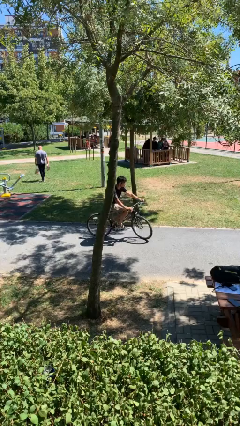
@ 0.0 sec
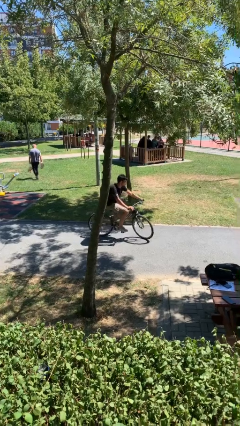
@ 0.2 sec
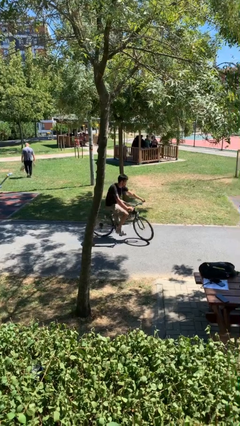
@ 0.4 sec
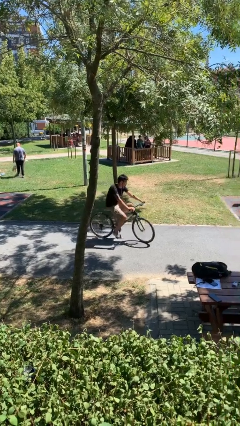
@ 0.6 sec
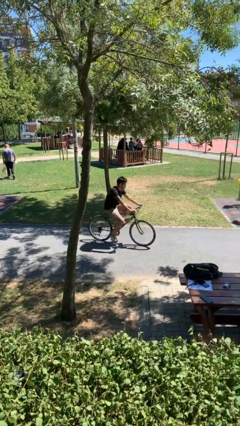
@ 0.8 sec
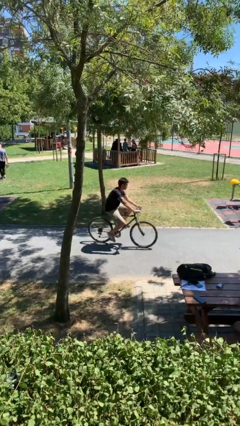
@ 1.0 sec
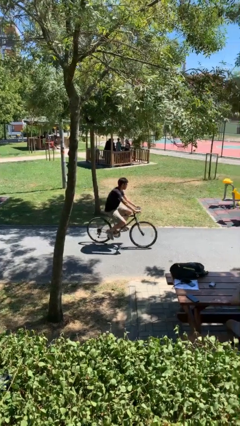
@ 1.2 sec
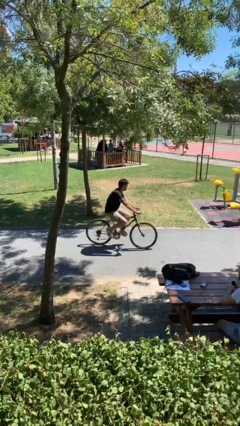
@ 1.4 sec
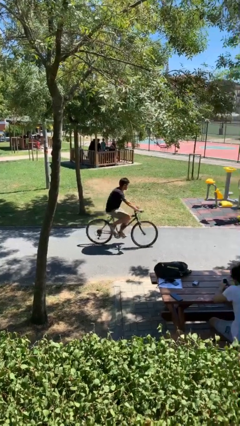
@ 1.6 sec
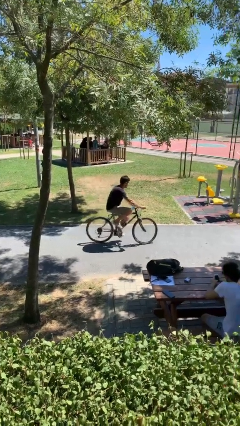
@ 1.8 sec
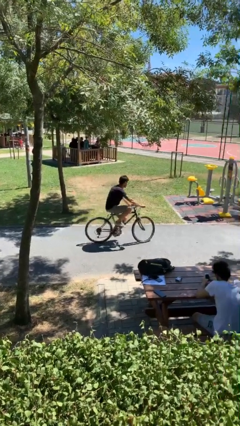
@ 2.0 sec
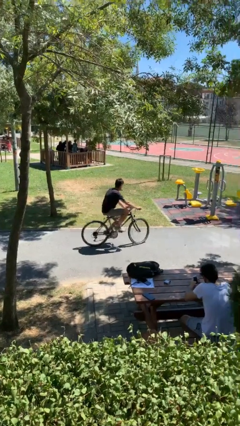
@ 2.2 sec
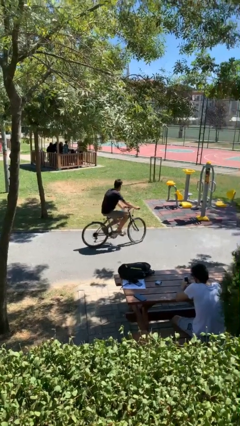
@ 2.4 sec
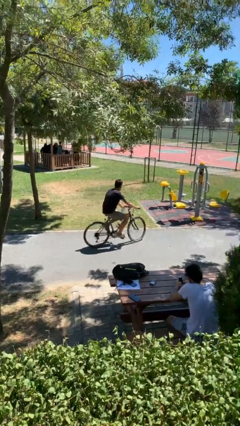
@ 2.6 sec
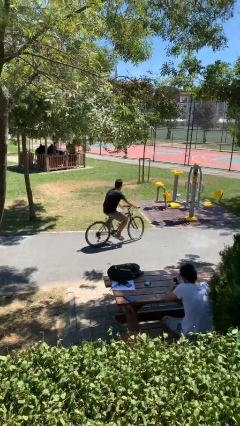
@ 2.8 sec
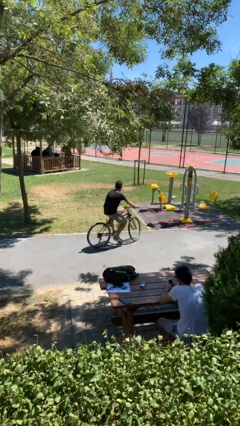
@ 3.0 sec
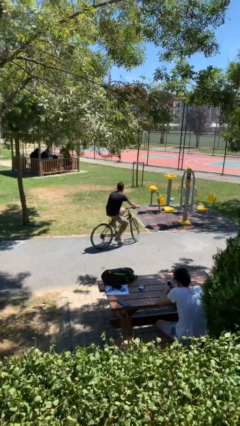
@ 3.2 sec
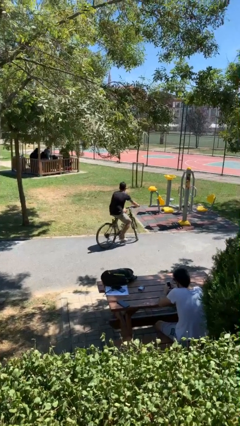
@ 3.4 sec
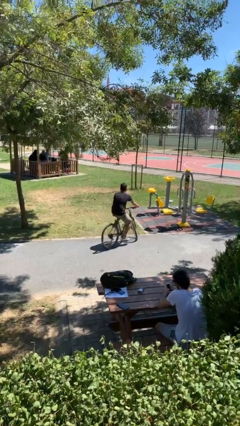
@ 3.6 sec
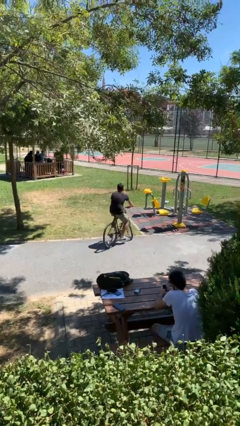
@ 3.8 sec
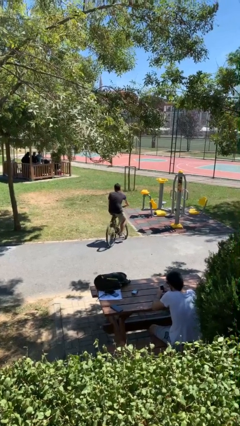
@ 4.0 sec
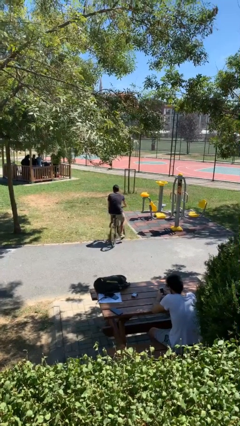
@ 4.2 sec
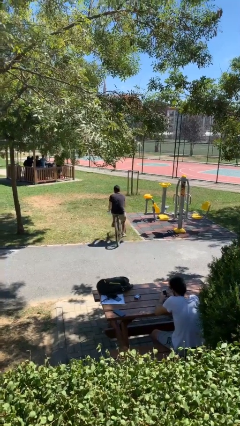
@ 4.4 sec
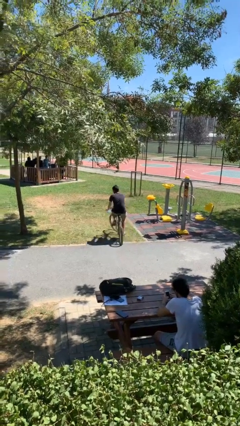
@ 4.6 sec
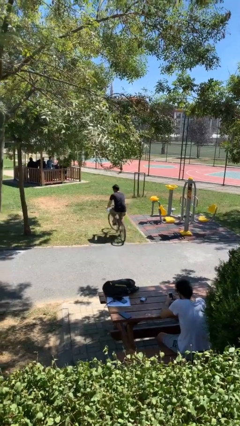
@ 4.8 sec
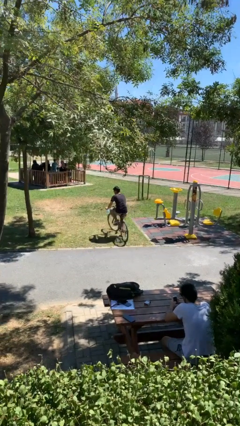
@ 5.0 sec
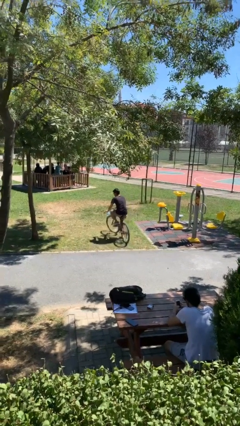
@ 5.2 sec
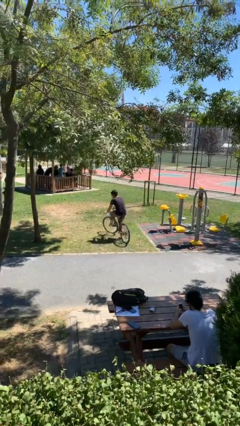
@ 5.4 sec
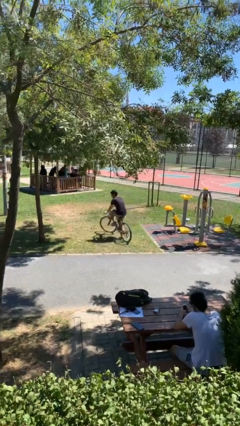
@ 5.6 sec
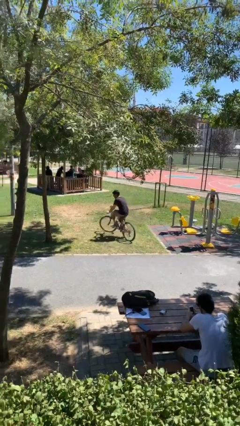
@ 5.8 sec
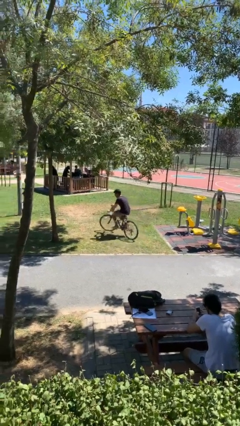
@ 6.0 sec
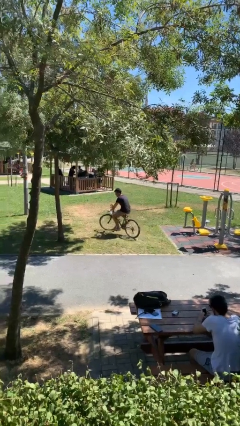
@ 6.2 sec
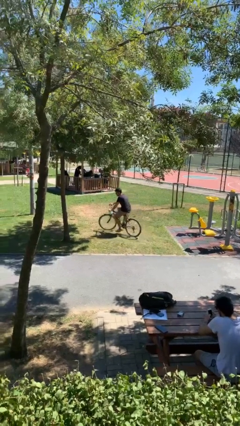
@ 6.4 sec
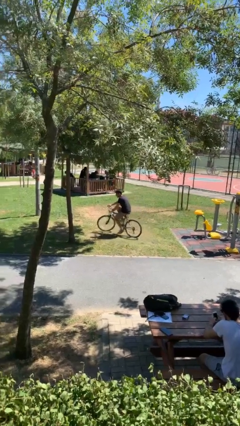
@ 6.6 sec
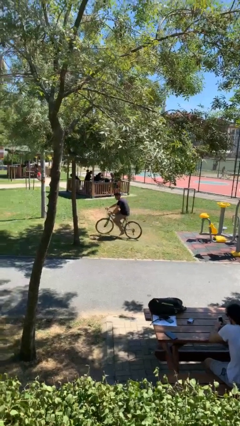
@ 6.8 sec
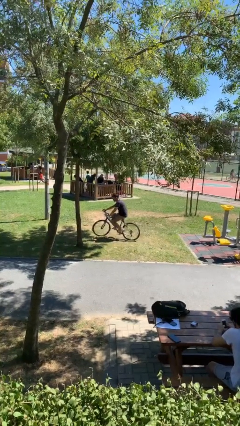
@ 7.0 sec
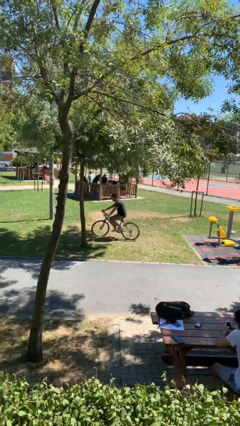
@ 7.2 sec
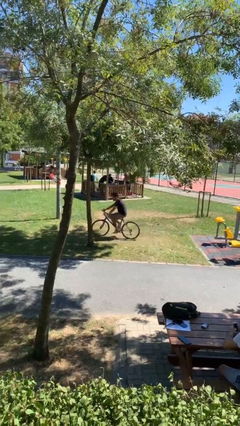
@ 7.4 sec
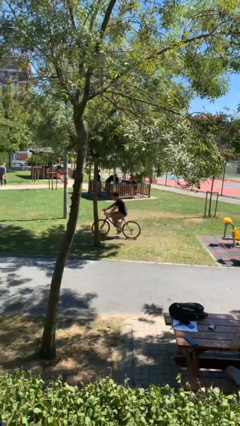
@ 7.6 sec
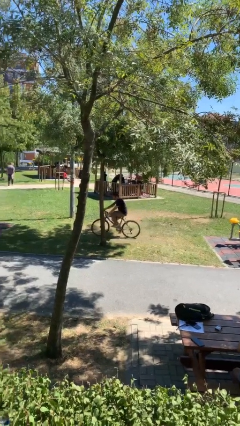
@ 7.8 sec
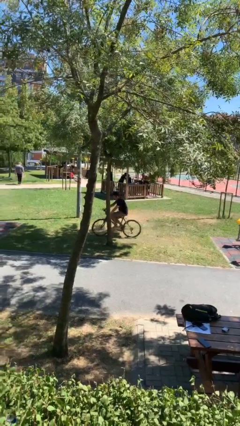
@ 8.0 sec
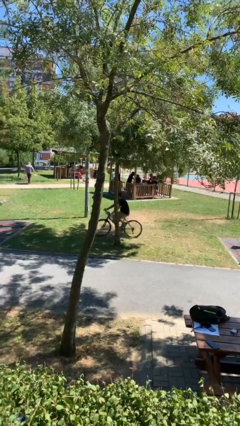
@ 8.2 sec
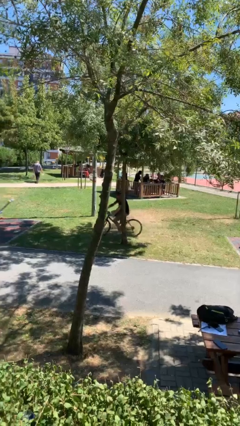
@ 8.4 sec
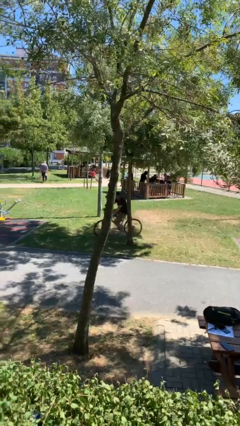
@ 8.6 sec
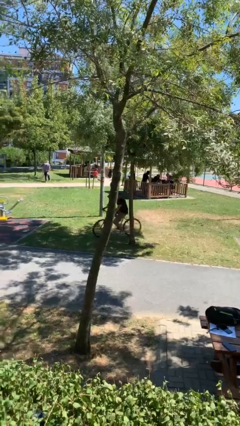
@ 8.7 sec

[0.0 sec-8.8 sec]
person rides bicycle

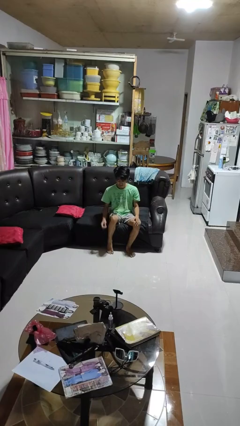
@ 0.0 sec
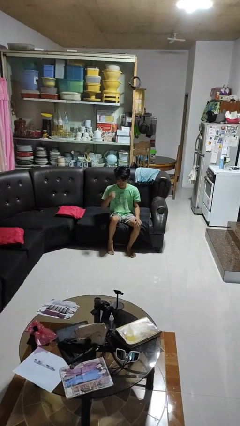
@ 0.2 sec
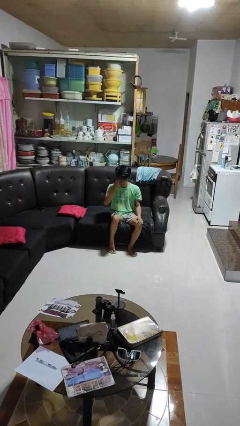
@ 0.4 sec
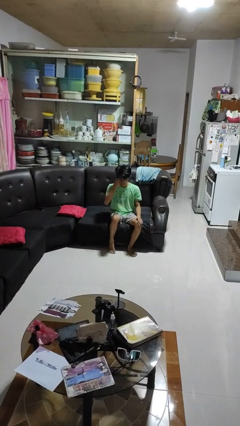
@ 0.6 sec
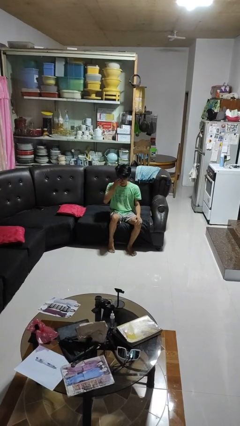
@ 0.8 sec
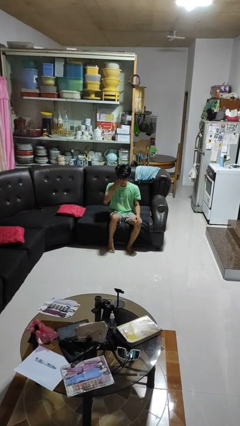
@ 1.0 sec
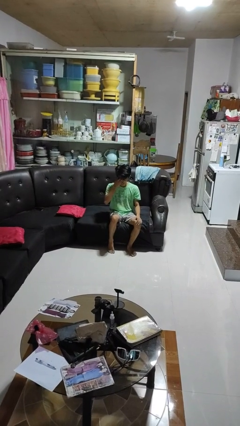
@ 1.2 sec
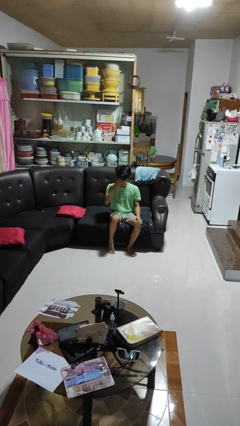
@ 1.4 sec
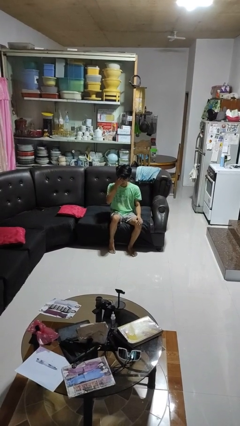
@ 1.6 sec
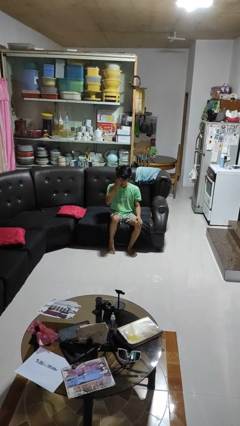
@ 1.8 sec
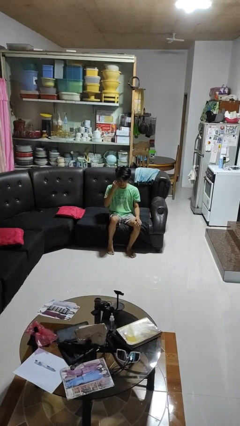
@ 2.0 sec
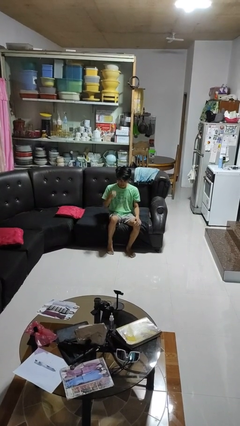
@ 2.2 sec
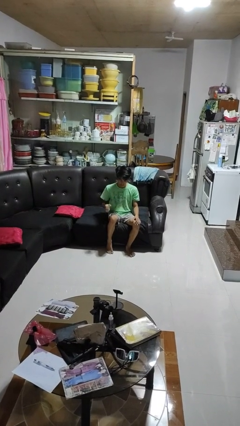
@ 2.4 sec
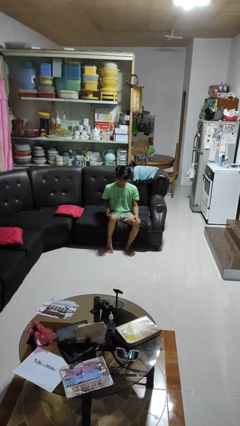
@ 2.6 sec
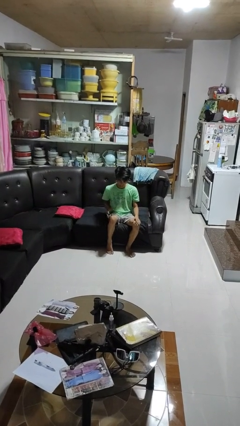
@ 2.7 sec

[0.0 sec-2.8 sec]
person scratches face

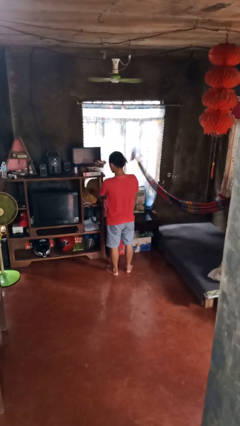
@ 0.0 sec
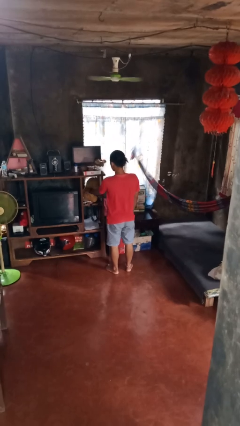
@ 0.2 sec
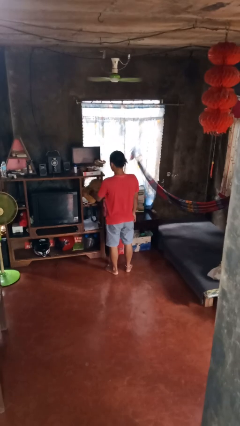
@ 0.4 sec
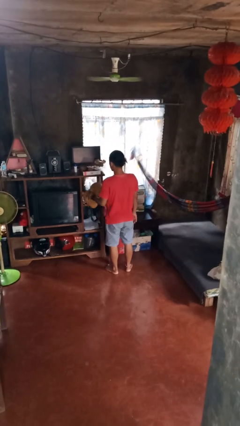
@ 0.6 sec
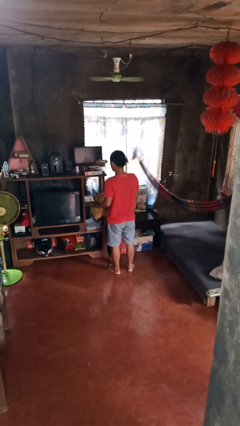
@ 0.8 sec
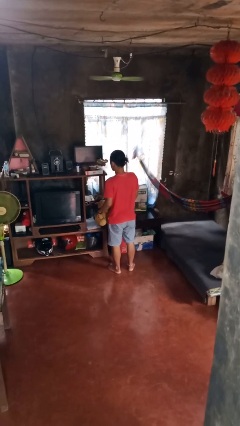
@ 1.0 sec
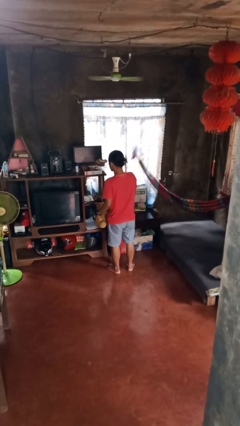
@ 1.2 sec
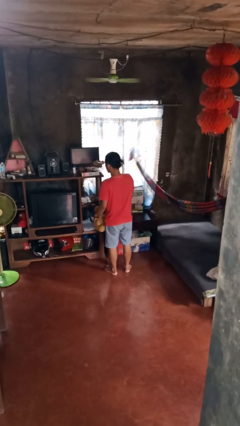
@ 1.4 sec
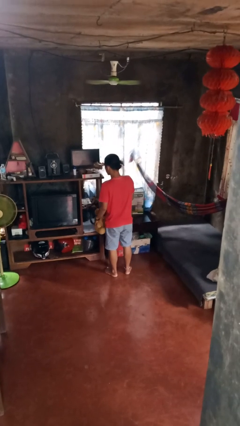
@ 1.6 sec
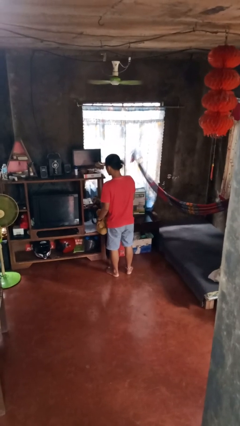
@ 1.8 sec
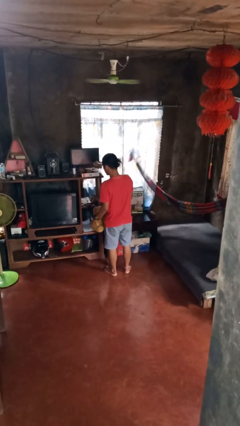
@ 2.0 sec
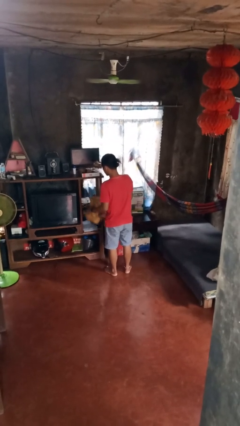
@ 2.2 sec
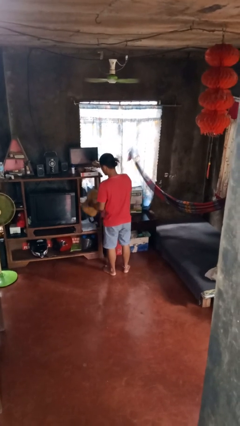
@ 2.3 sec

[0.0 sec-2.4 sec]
person picks up object from cabinet

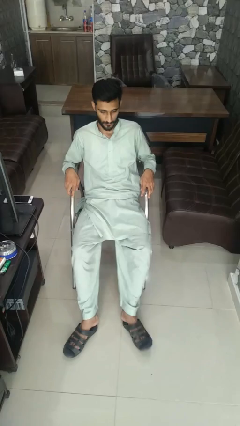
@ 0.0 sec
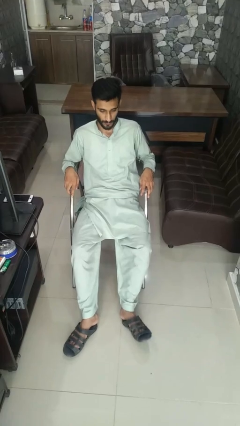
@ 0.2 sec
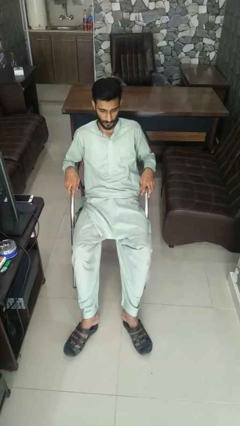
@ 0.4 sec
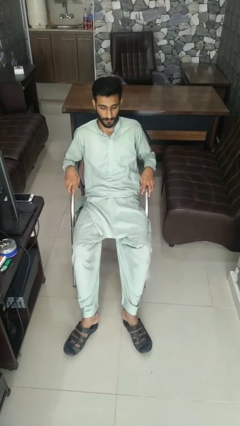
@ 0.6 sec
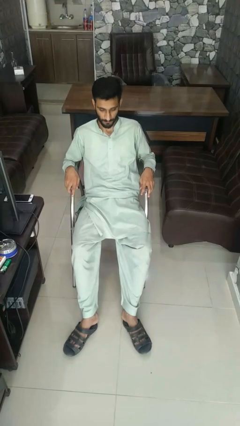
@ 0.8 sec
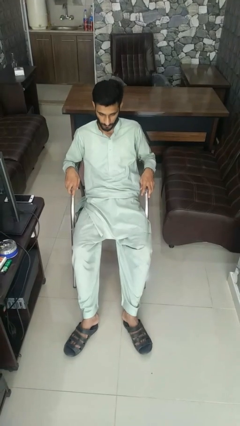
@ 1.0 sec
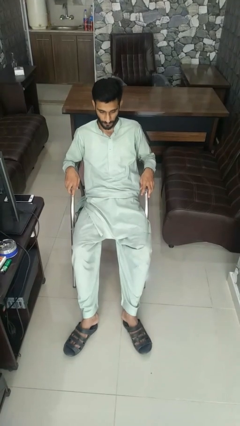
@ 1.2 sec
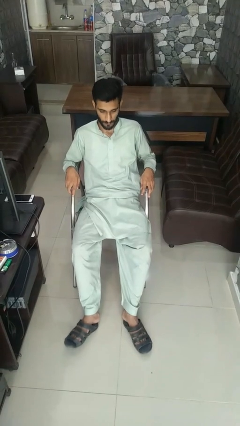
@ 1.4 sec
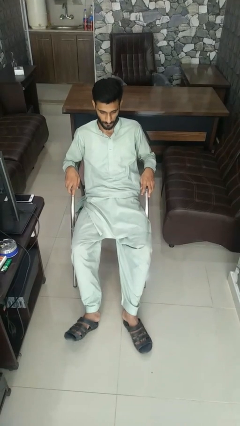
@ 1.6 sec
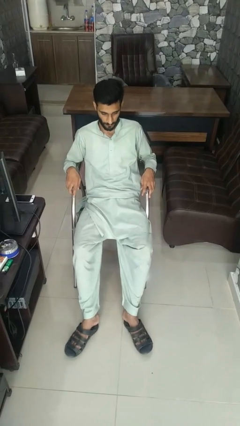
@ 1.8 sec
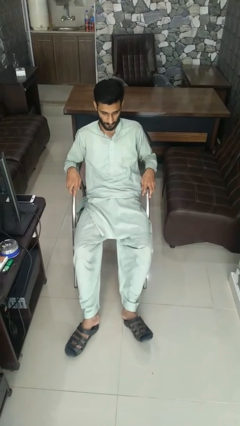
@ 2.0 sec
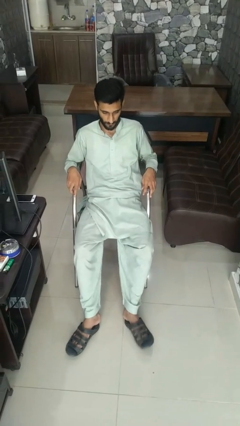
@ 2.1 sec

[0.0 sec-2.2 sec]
person nods head

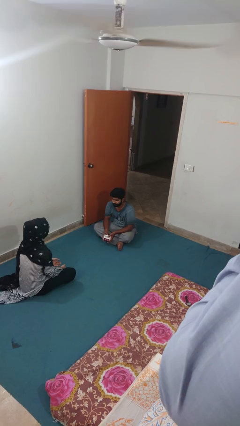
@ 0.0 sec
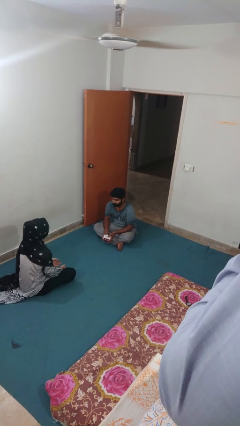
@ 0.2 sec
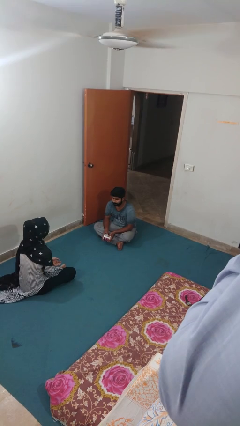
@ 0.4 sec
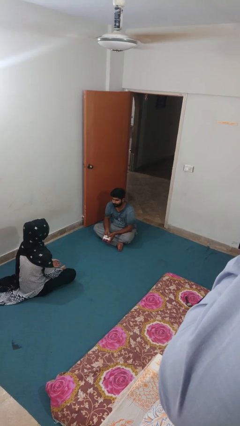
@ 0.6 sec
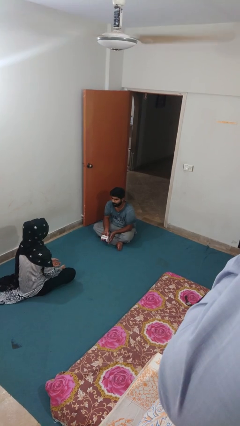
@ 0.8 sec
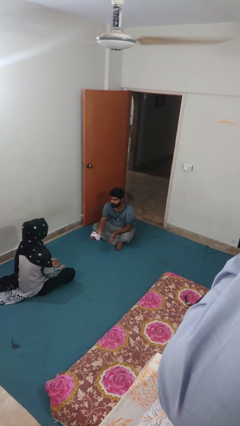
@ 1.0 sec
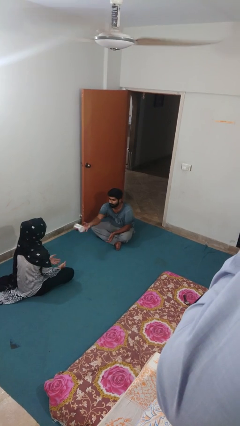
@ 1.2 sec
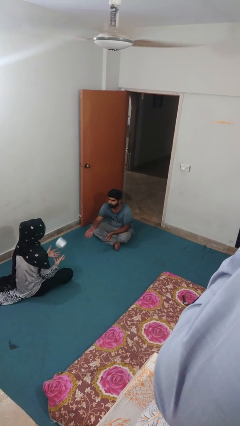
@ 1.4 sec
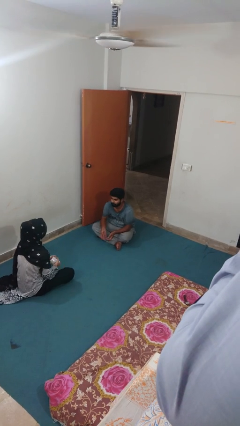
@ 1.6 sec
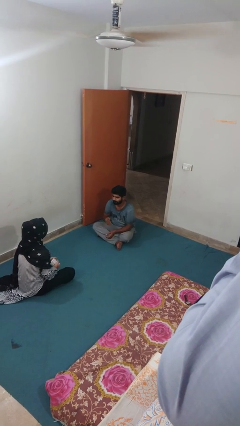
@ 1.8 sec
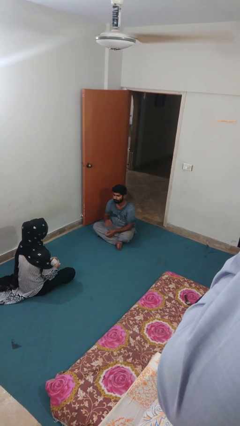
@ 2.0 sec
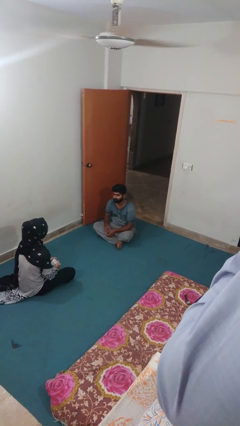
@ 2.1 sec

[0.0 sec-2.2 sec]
person throws object to person
